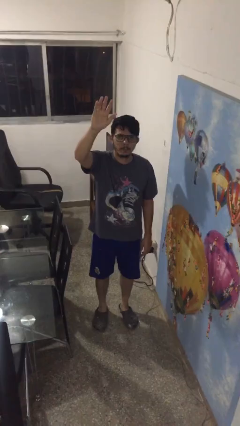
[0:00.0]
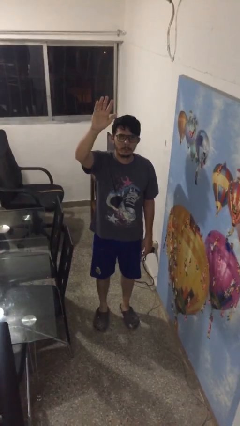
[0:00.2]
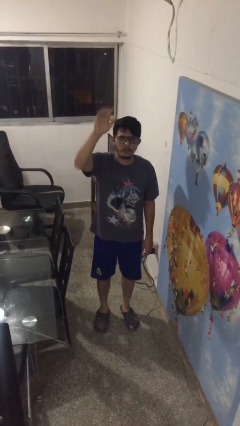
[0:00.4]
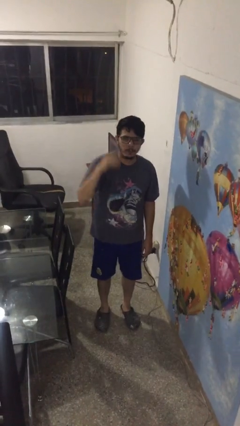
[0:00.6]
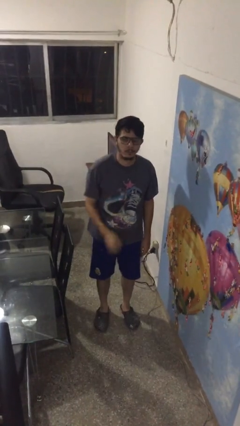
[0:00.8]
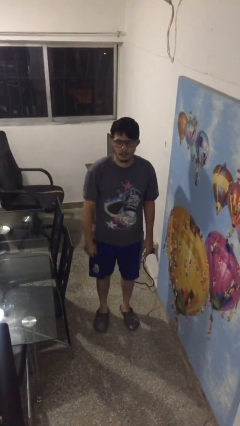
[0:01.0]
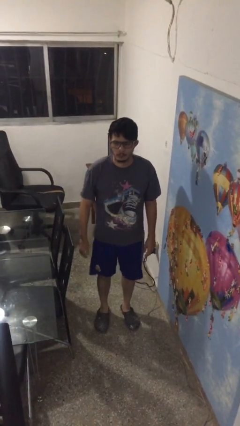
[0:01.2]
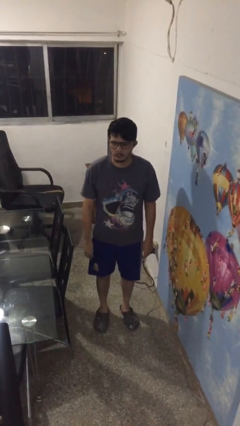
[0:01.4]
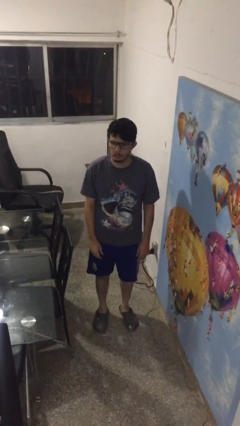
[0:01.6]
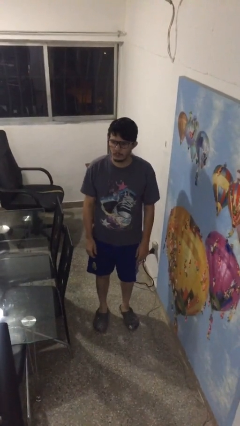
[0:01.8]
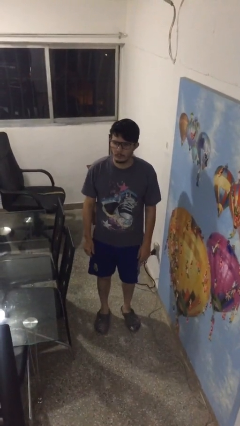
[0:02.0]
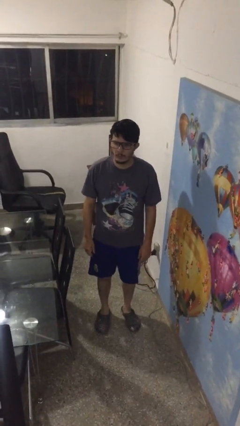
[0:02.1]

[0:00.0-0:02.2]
person gestures lower hand

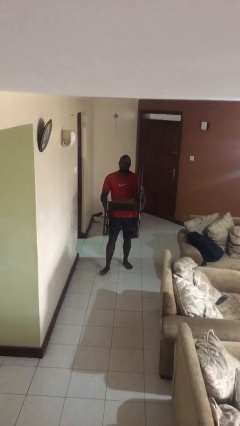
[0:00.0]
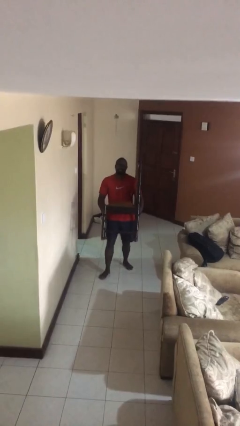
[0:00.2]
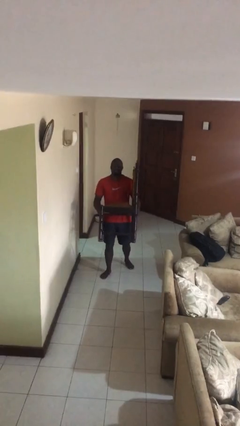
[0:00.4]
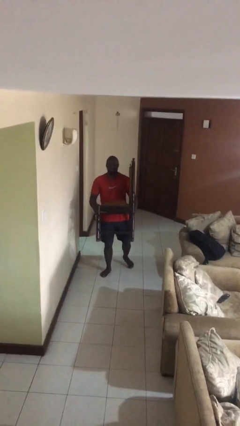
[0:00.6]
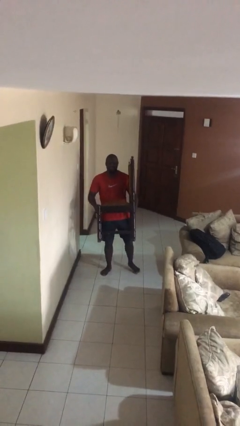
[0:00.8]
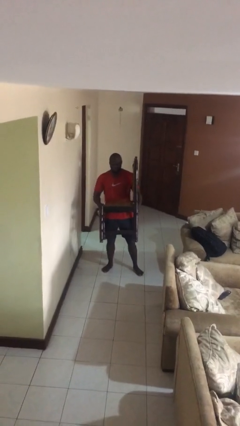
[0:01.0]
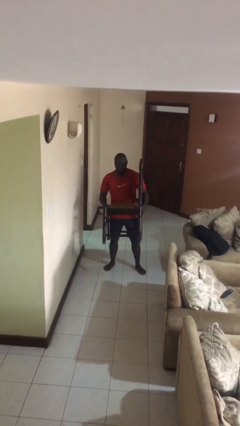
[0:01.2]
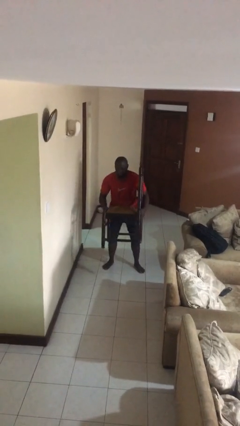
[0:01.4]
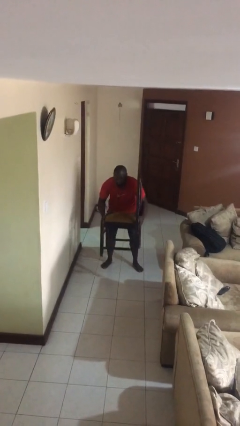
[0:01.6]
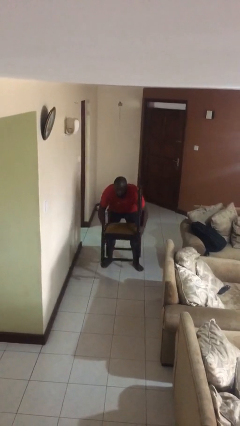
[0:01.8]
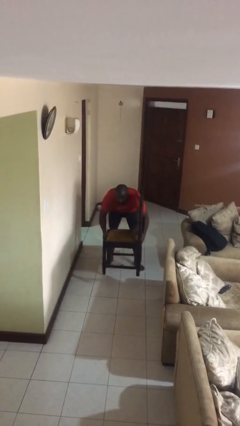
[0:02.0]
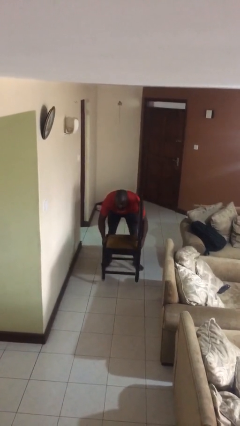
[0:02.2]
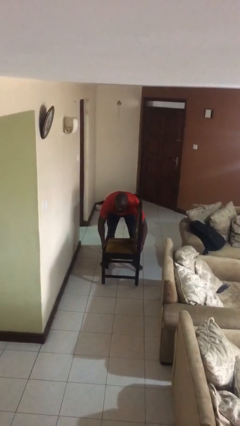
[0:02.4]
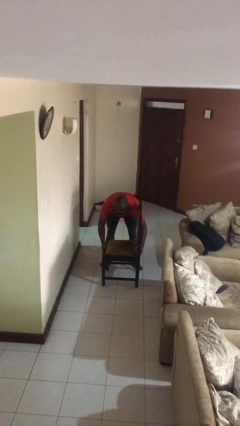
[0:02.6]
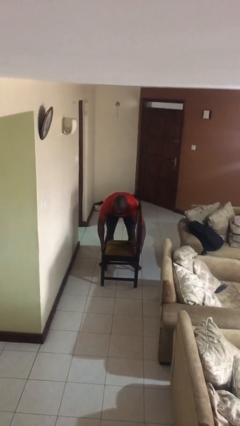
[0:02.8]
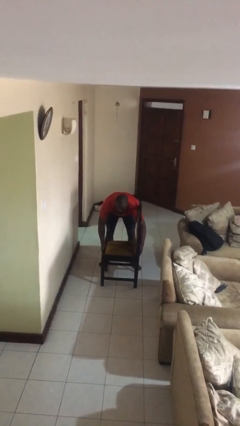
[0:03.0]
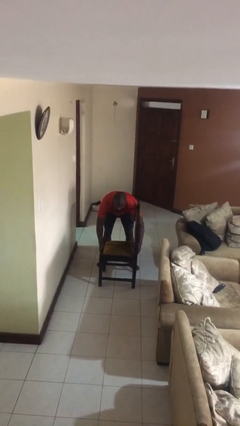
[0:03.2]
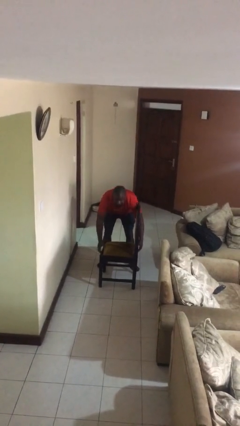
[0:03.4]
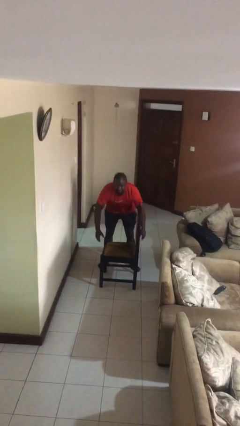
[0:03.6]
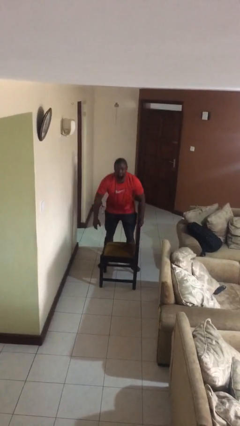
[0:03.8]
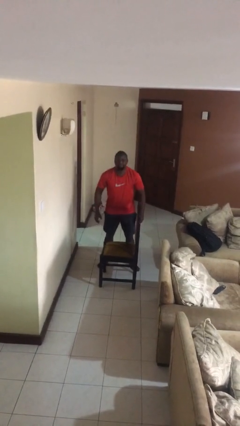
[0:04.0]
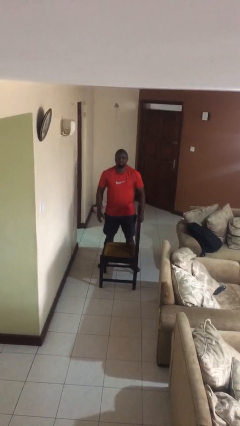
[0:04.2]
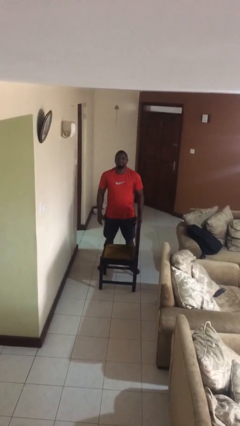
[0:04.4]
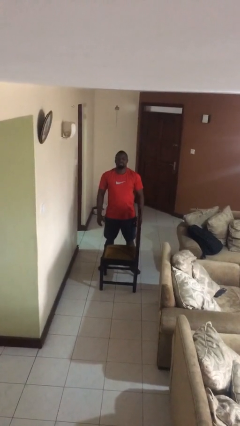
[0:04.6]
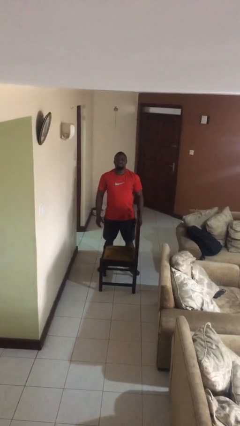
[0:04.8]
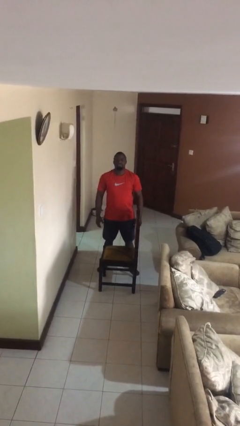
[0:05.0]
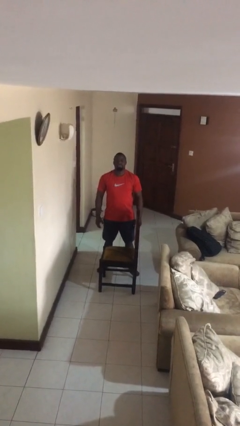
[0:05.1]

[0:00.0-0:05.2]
person puts down object on floor

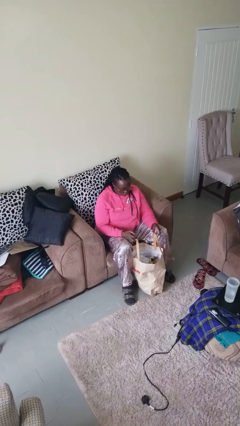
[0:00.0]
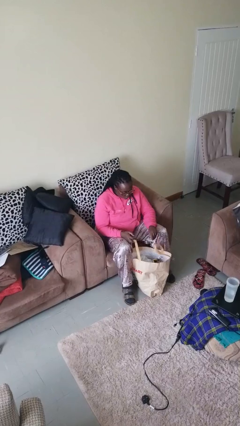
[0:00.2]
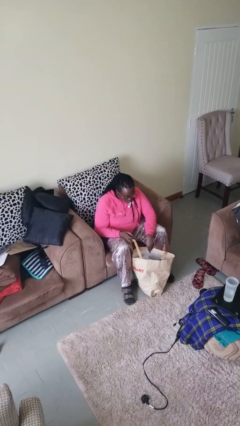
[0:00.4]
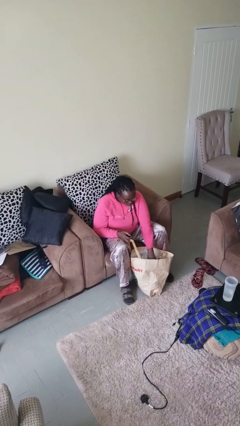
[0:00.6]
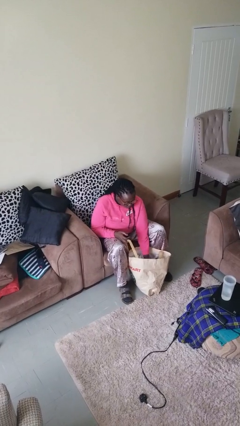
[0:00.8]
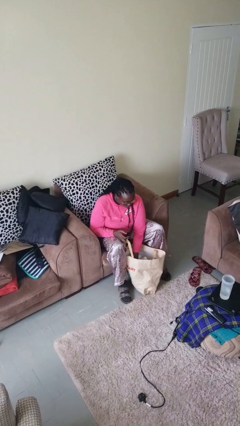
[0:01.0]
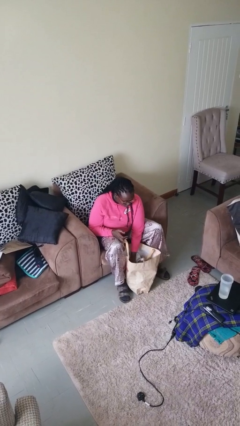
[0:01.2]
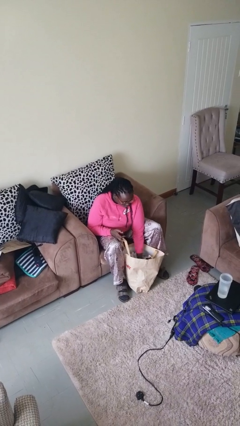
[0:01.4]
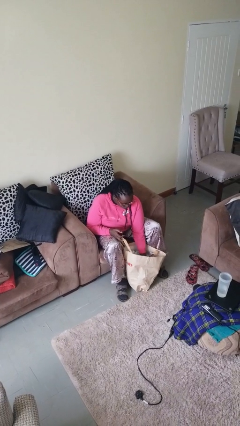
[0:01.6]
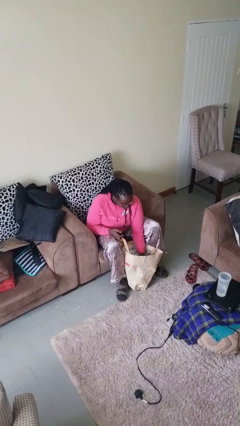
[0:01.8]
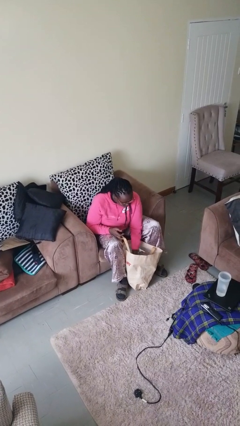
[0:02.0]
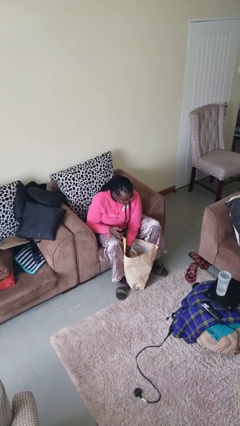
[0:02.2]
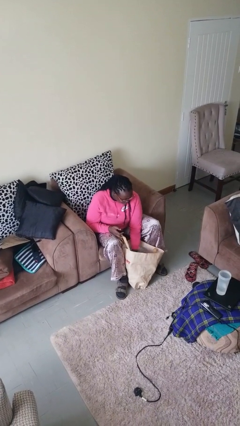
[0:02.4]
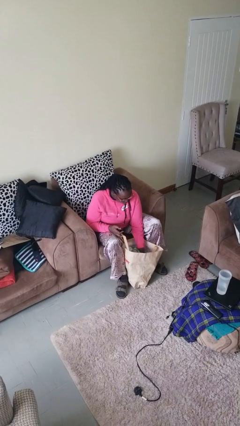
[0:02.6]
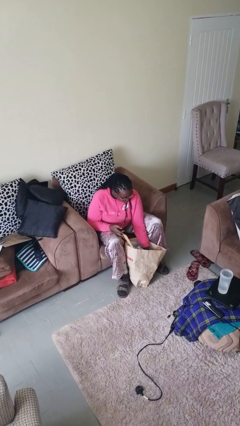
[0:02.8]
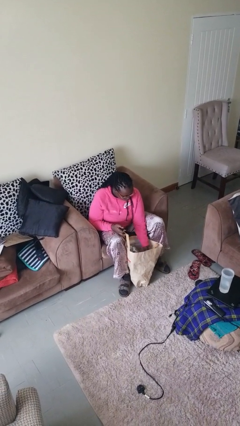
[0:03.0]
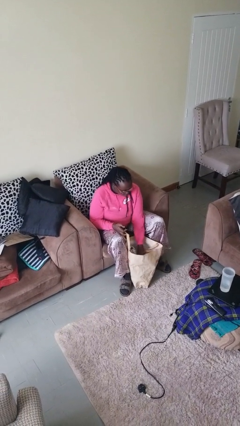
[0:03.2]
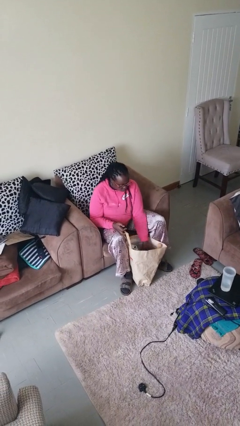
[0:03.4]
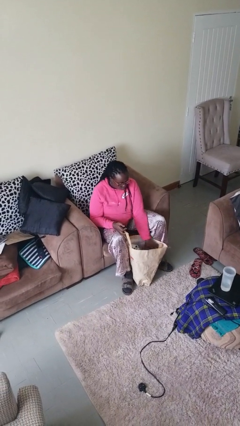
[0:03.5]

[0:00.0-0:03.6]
person searches in bag

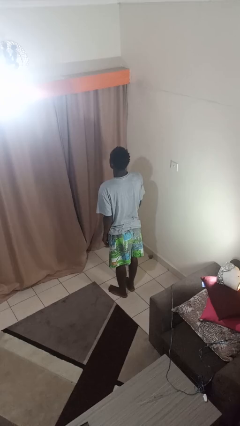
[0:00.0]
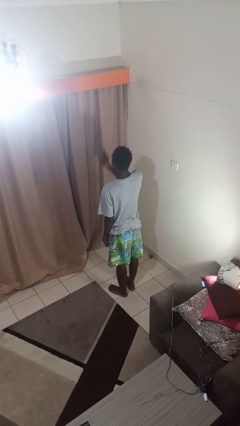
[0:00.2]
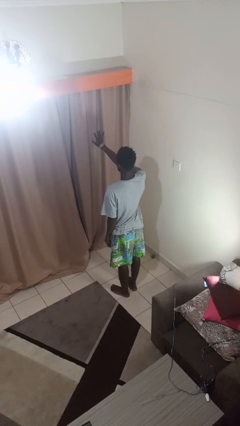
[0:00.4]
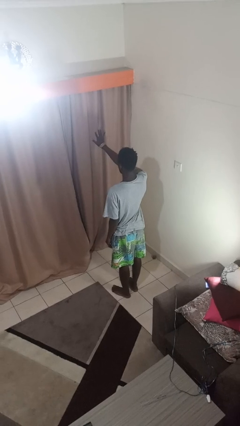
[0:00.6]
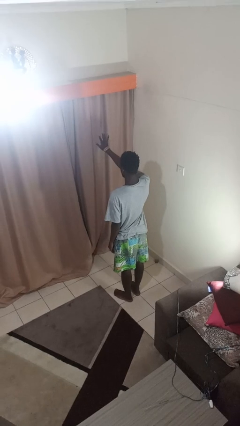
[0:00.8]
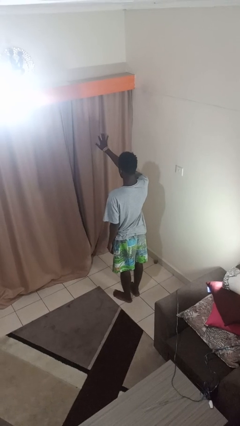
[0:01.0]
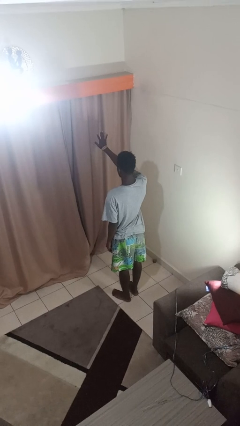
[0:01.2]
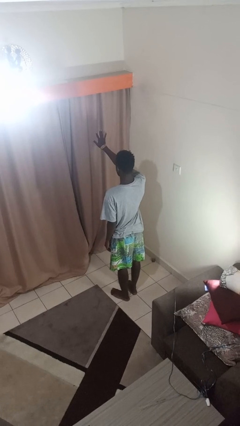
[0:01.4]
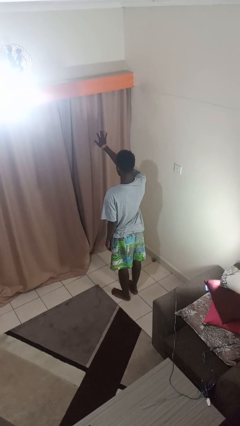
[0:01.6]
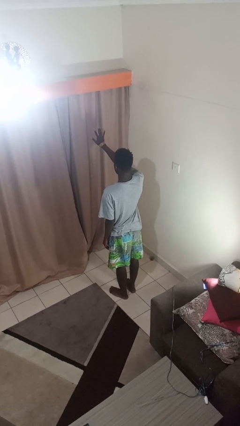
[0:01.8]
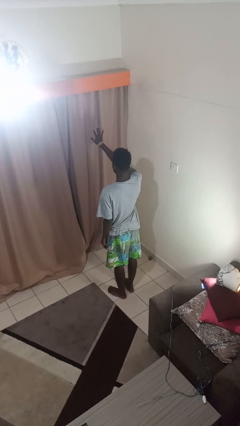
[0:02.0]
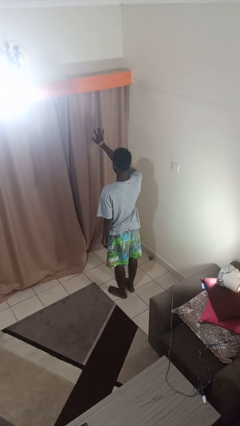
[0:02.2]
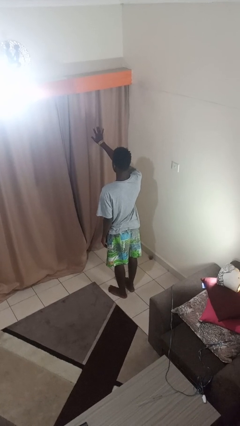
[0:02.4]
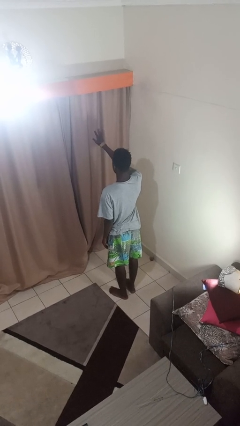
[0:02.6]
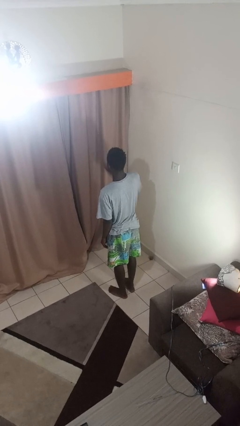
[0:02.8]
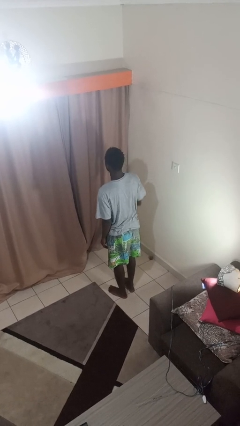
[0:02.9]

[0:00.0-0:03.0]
person gestures number five

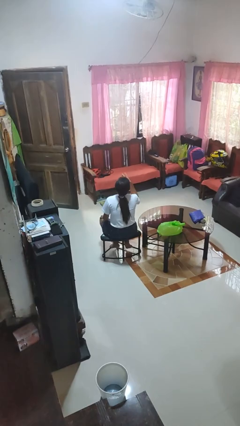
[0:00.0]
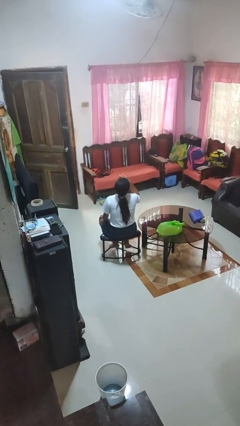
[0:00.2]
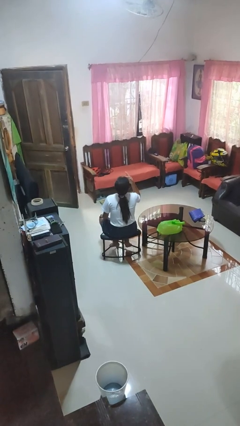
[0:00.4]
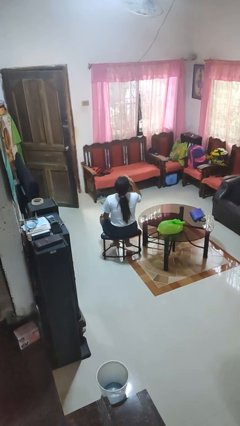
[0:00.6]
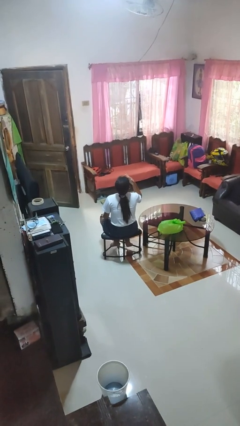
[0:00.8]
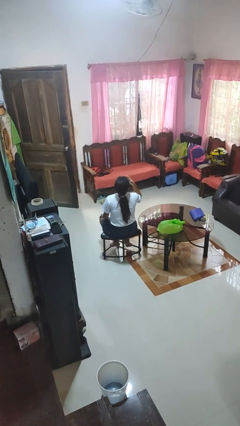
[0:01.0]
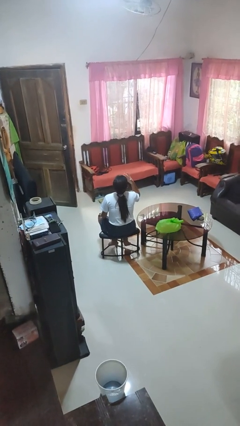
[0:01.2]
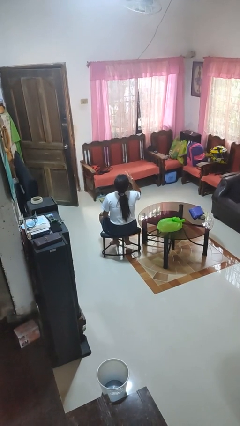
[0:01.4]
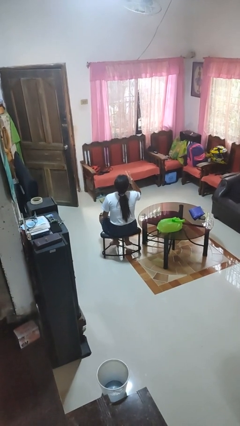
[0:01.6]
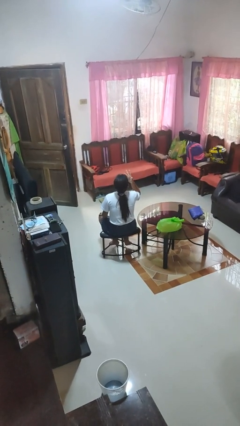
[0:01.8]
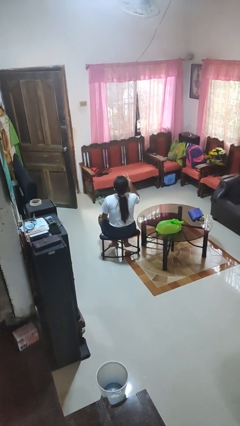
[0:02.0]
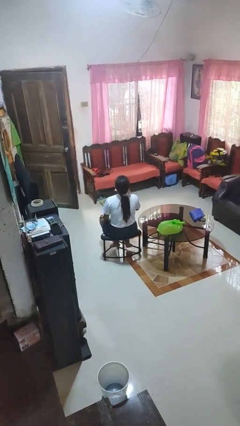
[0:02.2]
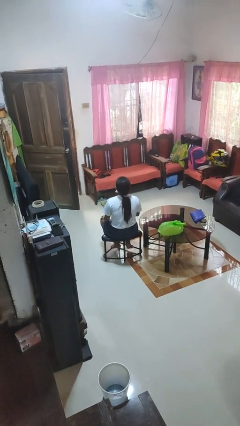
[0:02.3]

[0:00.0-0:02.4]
person licks fingers

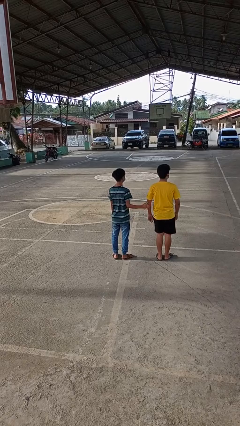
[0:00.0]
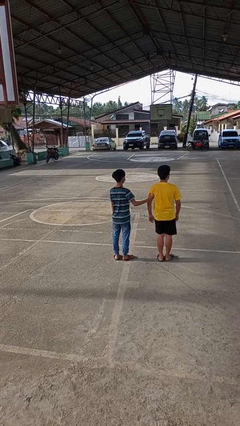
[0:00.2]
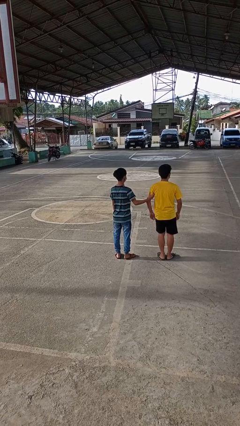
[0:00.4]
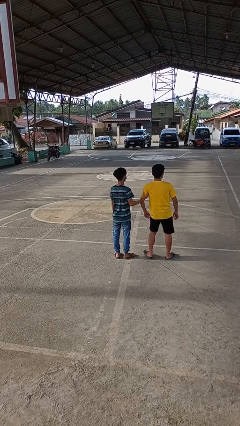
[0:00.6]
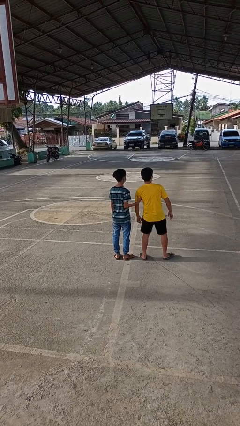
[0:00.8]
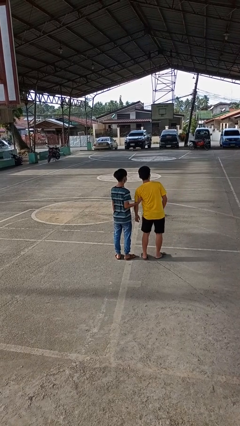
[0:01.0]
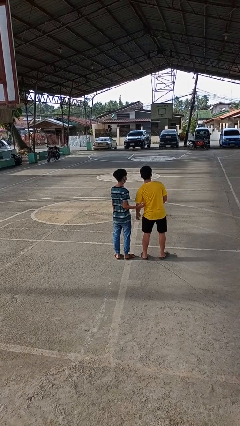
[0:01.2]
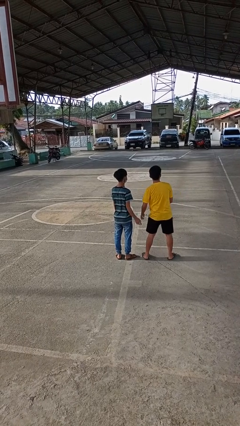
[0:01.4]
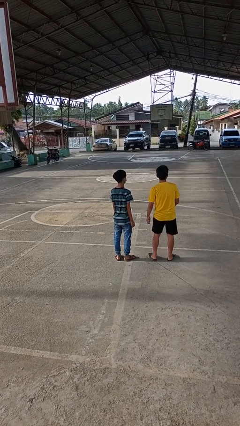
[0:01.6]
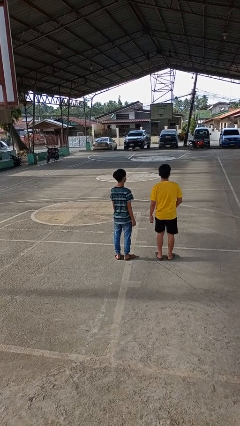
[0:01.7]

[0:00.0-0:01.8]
person grabs person by bicep
